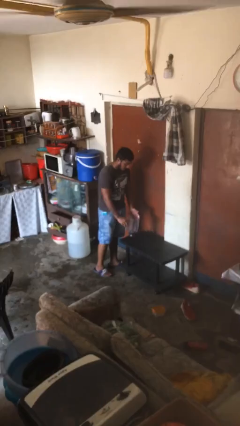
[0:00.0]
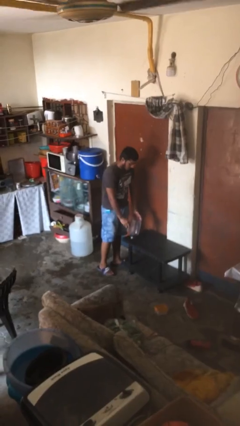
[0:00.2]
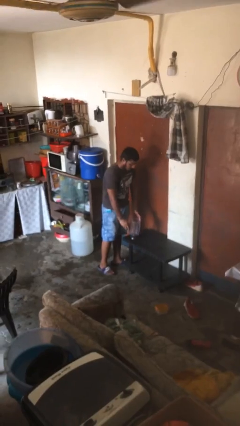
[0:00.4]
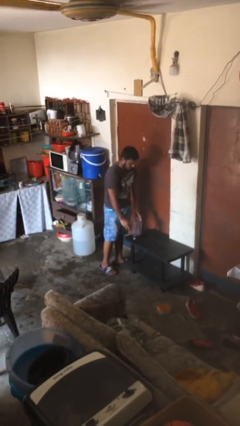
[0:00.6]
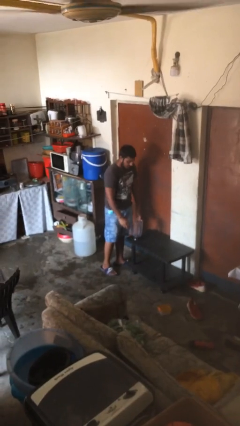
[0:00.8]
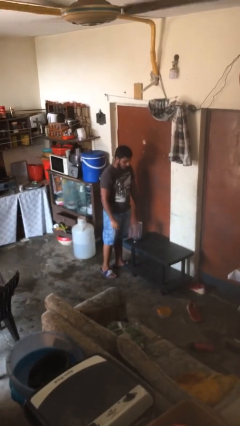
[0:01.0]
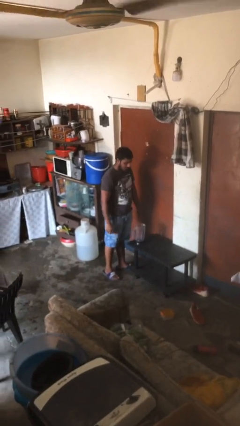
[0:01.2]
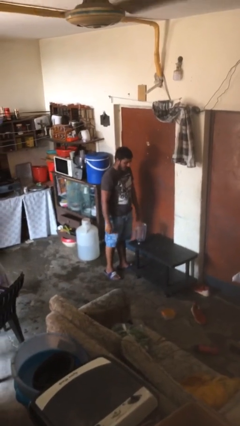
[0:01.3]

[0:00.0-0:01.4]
person puts down object on table

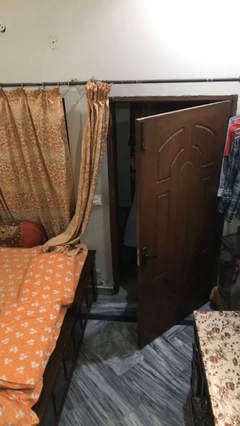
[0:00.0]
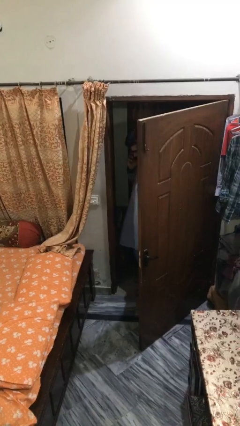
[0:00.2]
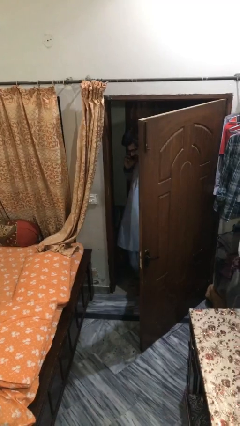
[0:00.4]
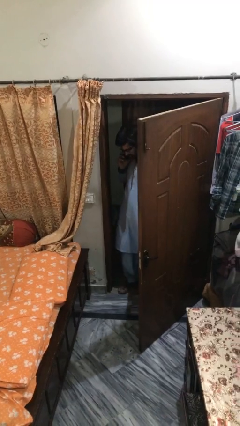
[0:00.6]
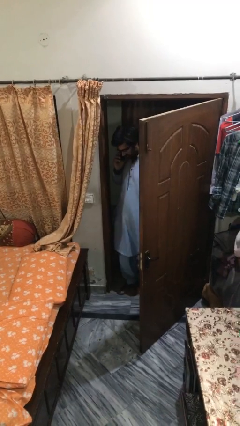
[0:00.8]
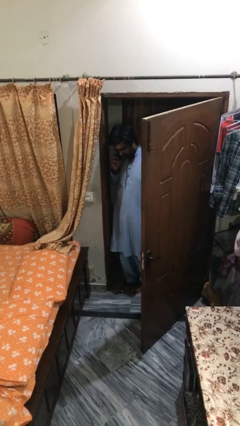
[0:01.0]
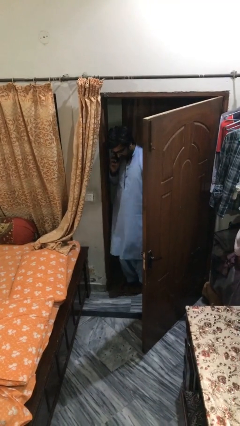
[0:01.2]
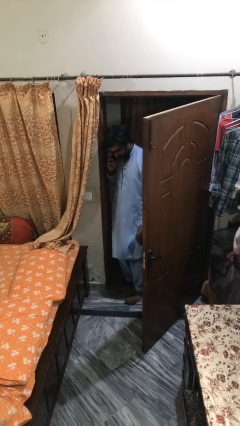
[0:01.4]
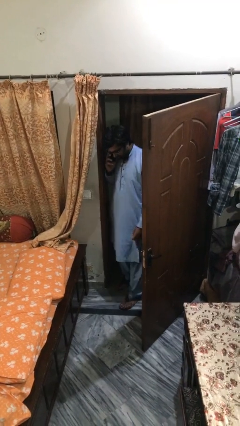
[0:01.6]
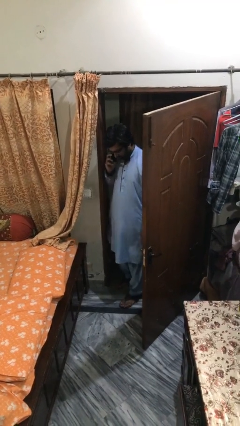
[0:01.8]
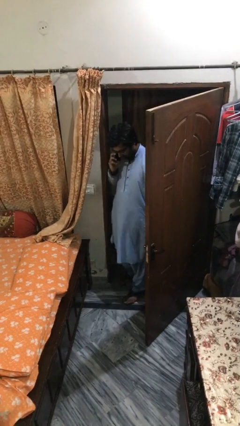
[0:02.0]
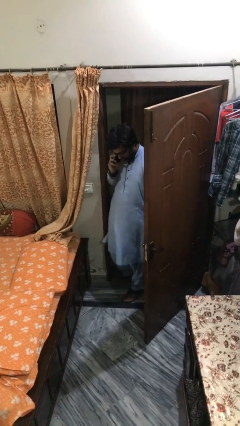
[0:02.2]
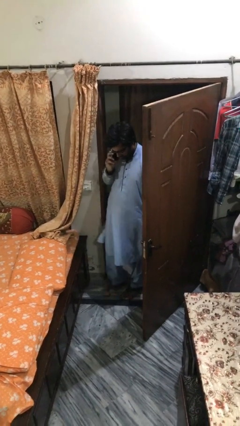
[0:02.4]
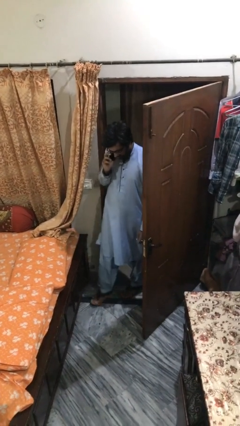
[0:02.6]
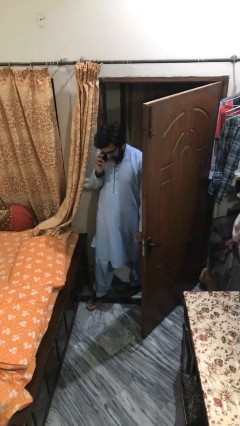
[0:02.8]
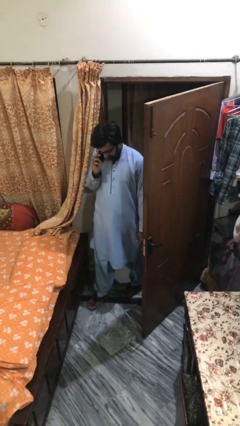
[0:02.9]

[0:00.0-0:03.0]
person enters scene through structure

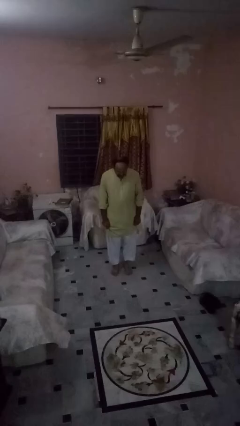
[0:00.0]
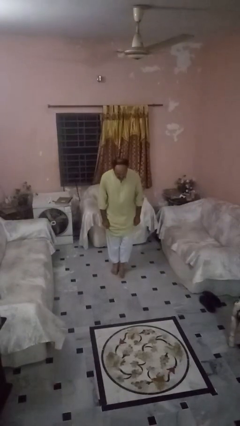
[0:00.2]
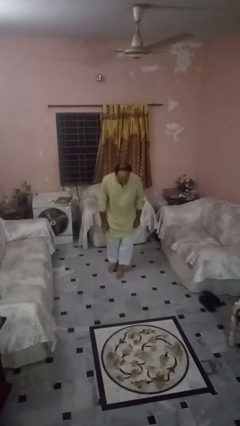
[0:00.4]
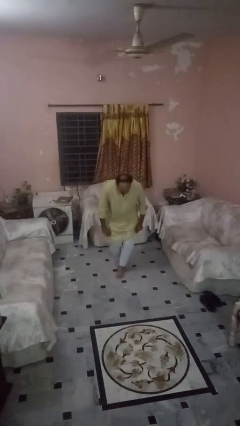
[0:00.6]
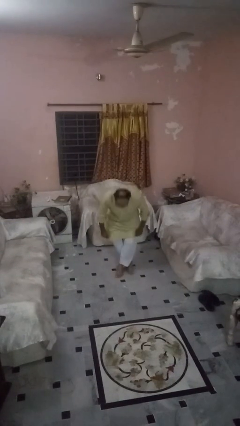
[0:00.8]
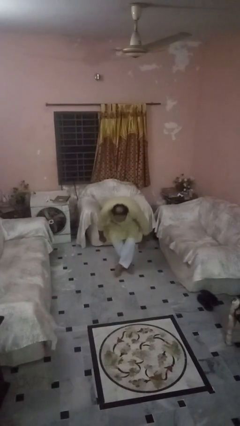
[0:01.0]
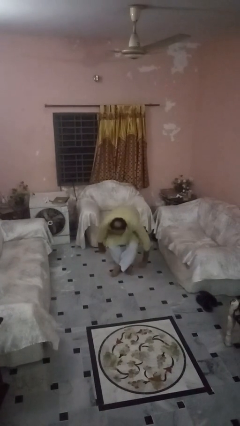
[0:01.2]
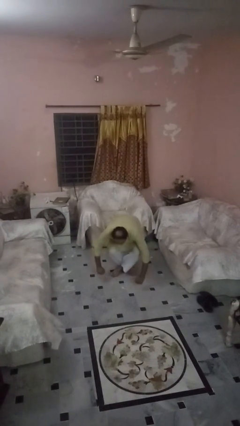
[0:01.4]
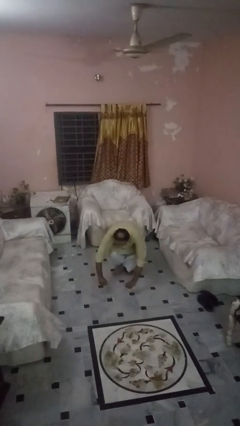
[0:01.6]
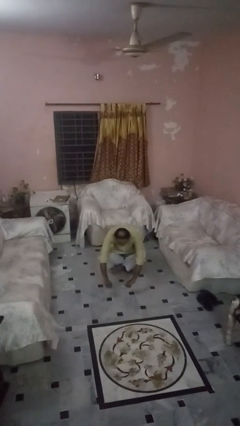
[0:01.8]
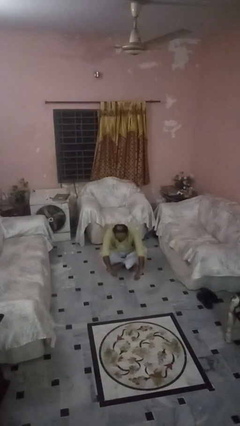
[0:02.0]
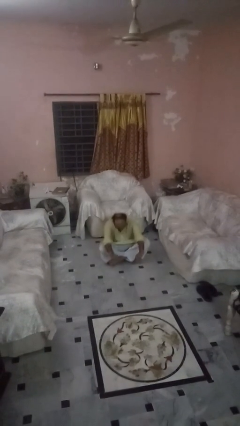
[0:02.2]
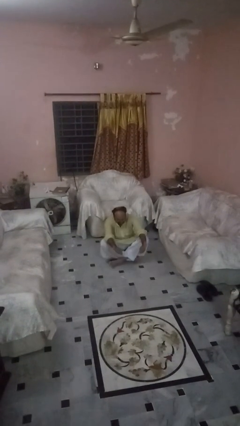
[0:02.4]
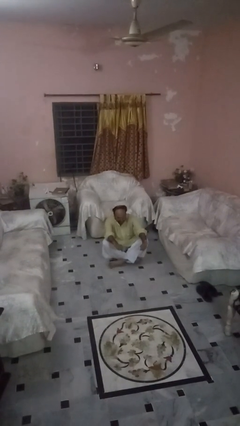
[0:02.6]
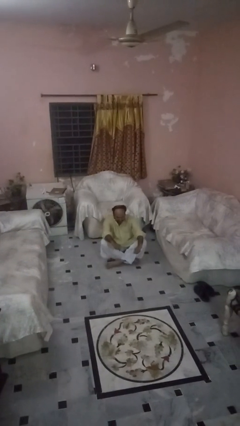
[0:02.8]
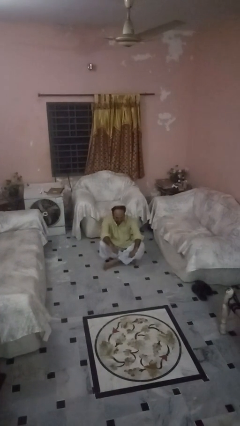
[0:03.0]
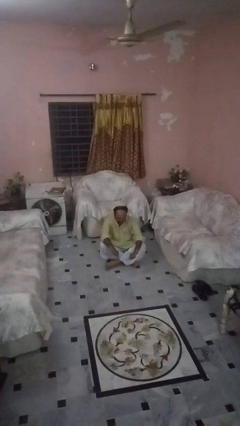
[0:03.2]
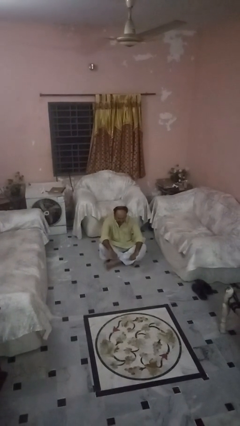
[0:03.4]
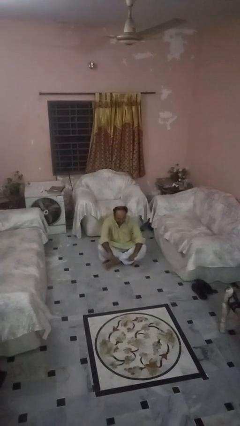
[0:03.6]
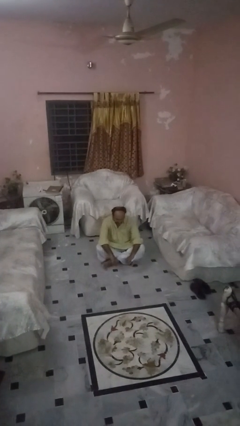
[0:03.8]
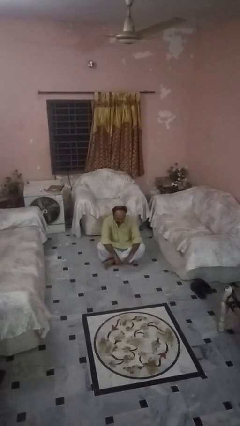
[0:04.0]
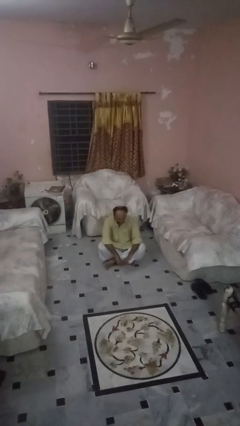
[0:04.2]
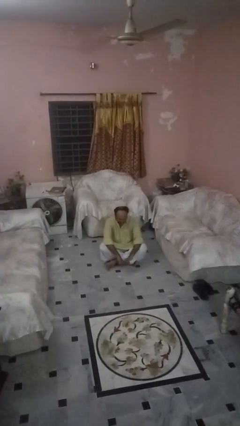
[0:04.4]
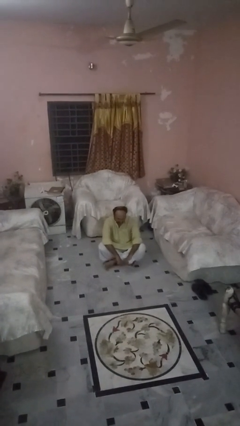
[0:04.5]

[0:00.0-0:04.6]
person sits crisscross

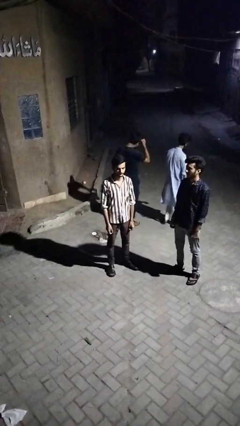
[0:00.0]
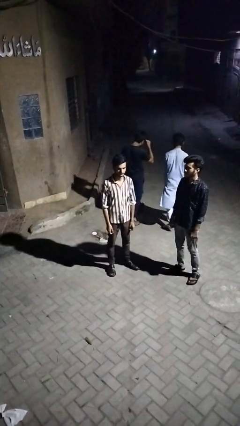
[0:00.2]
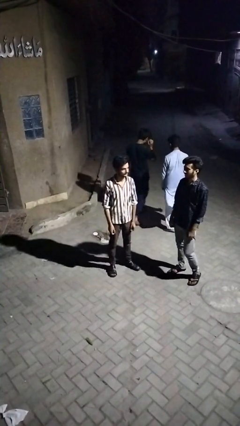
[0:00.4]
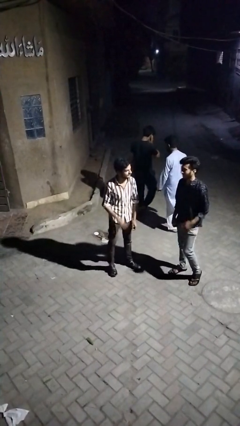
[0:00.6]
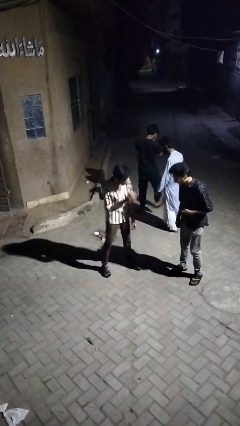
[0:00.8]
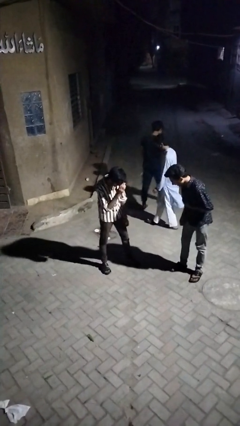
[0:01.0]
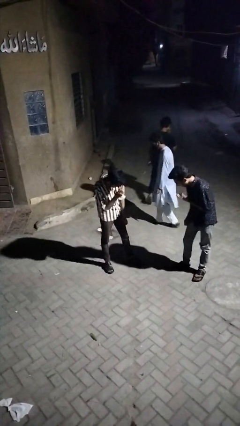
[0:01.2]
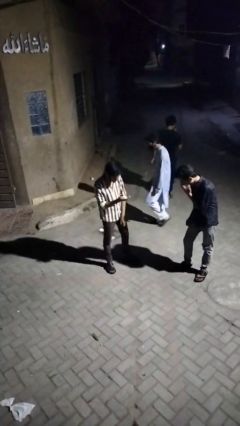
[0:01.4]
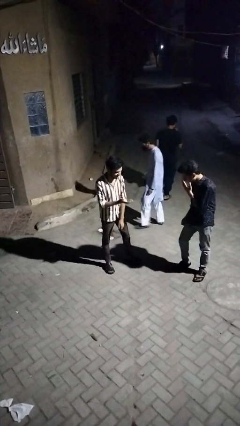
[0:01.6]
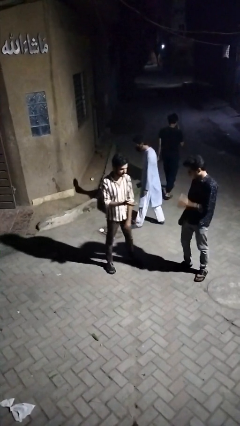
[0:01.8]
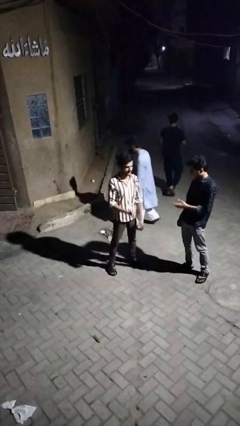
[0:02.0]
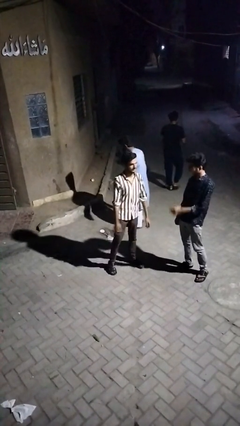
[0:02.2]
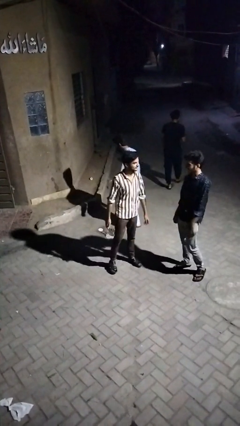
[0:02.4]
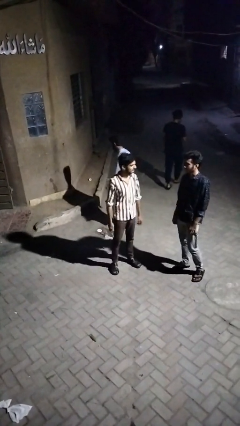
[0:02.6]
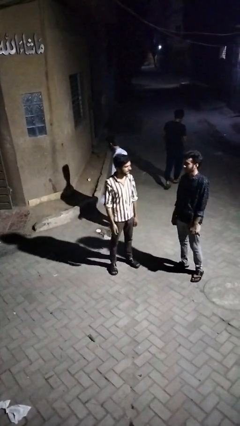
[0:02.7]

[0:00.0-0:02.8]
person laughs with person

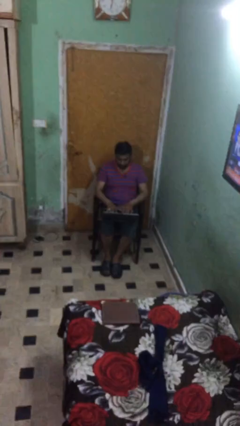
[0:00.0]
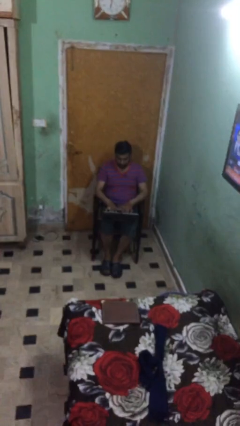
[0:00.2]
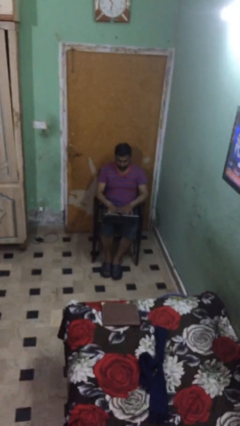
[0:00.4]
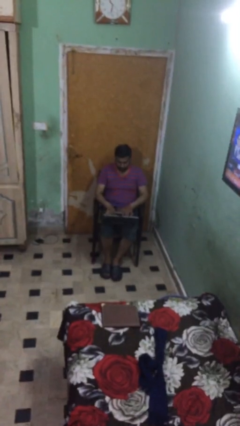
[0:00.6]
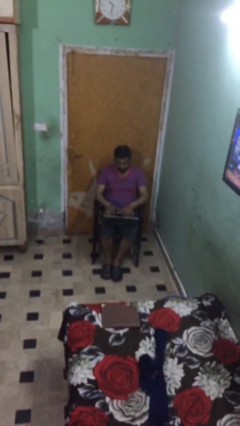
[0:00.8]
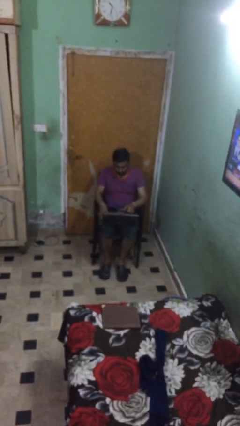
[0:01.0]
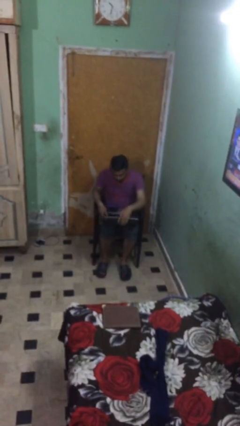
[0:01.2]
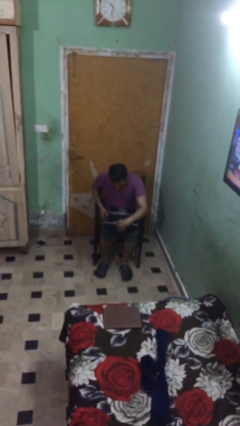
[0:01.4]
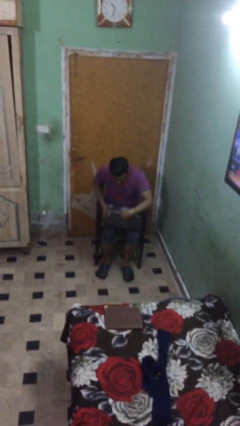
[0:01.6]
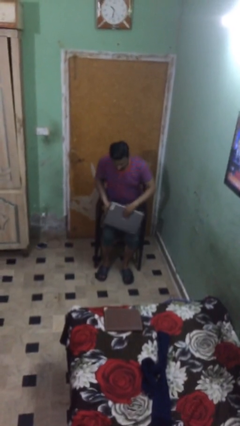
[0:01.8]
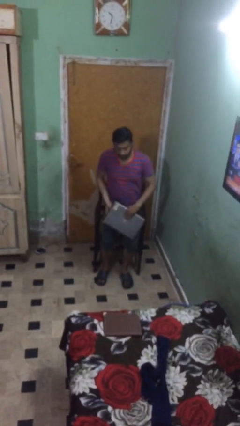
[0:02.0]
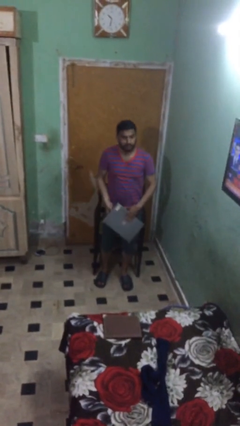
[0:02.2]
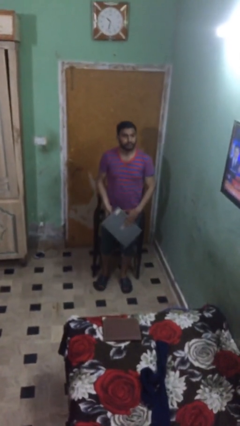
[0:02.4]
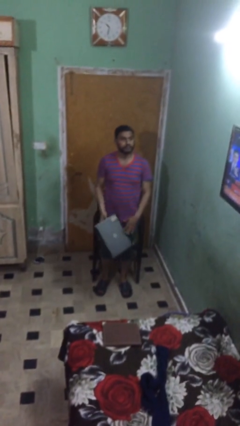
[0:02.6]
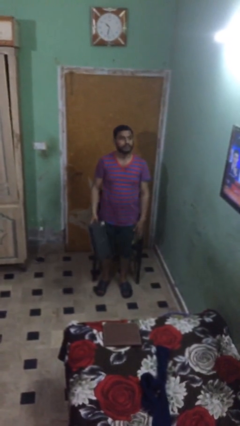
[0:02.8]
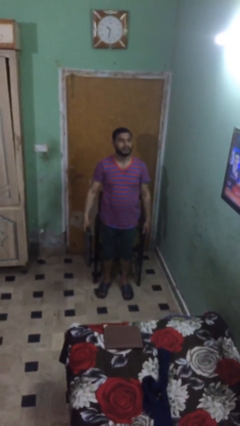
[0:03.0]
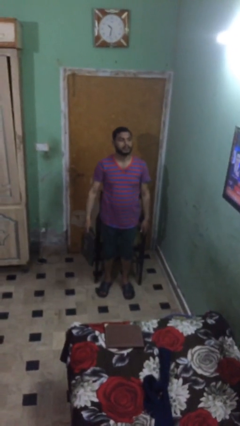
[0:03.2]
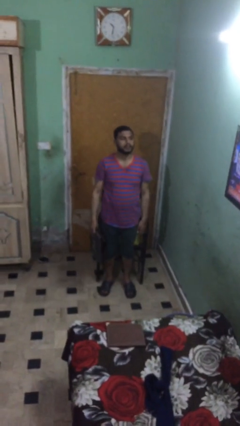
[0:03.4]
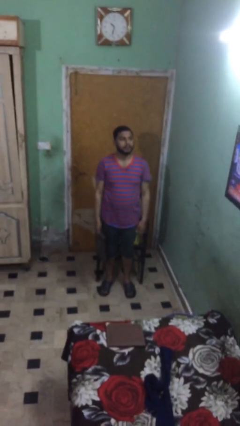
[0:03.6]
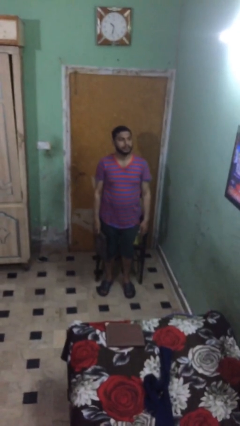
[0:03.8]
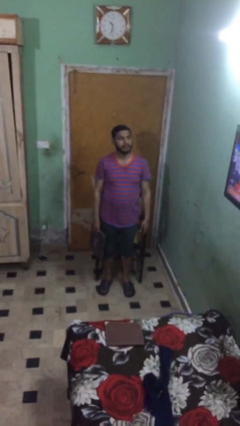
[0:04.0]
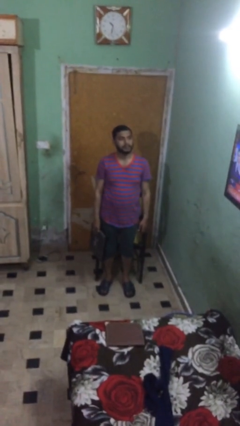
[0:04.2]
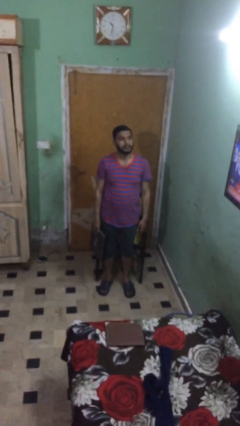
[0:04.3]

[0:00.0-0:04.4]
person stands up

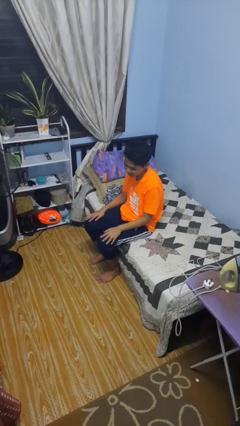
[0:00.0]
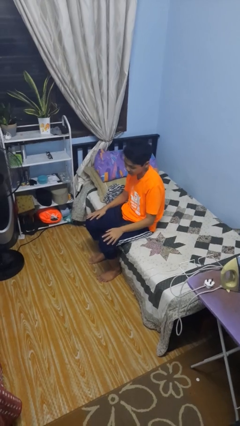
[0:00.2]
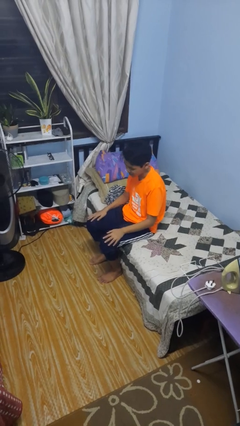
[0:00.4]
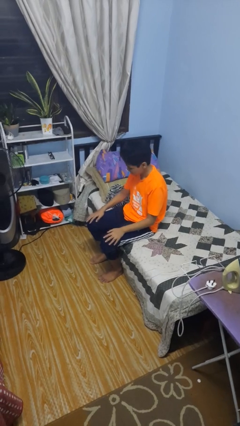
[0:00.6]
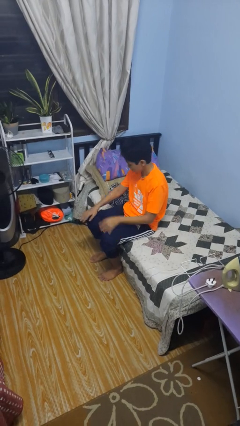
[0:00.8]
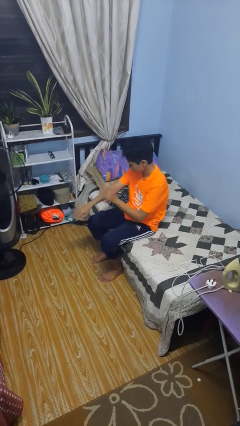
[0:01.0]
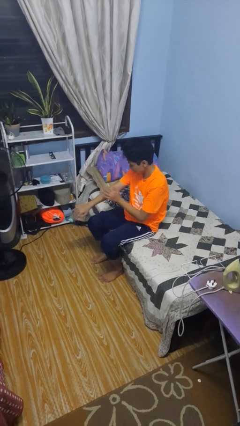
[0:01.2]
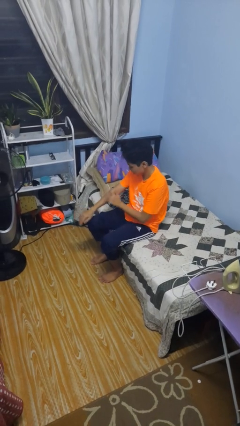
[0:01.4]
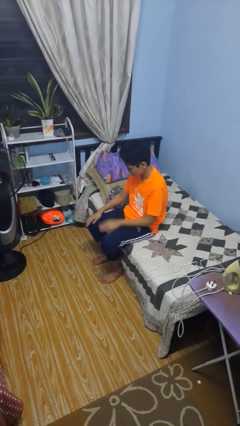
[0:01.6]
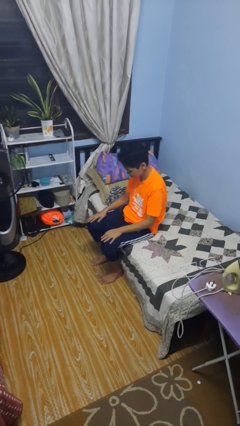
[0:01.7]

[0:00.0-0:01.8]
person swats bug
